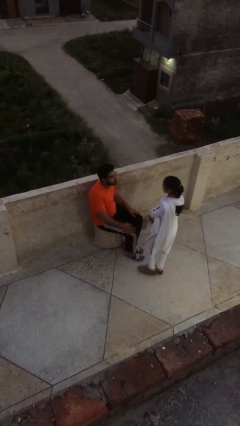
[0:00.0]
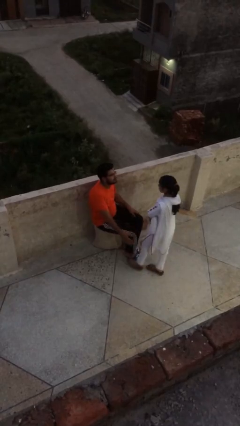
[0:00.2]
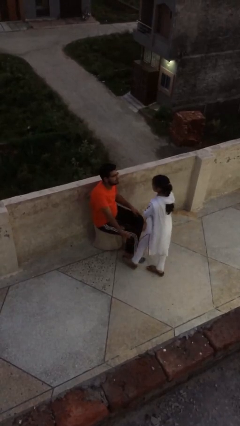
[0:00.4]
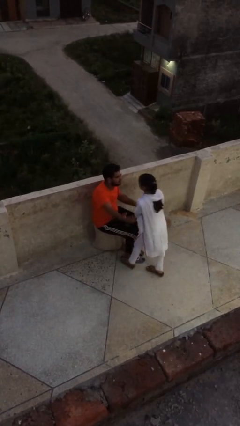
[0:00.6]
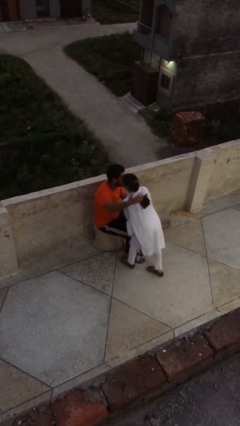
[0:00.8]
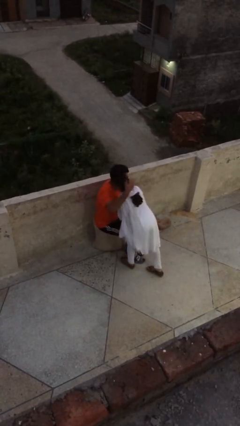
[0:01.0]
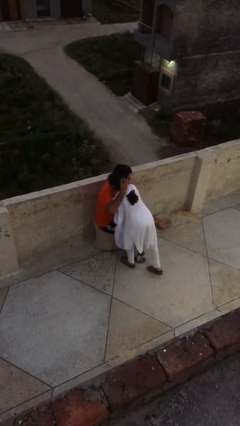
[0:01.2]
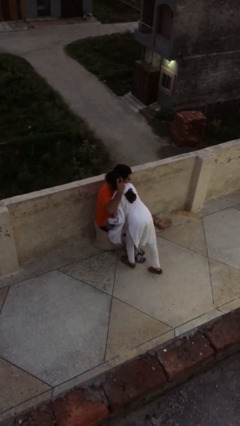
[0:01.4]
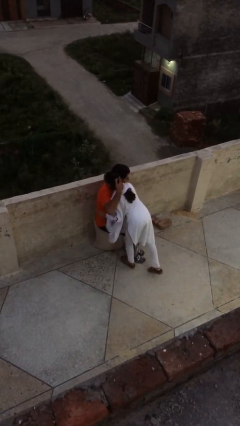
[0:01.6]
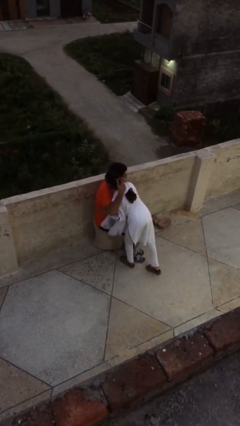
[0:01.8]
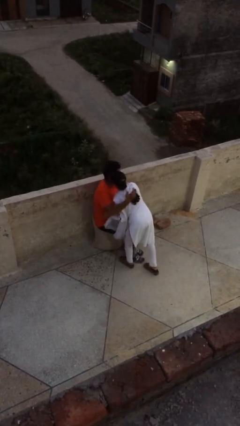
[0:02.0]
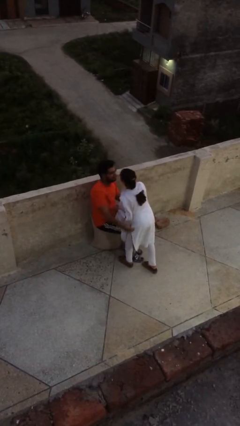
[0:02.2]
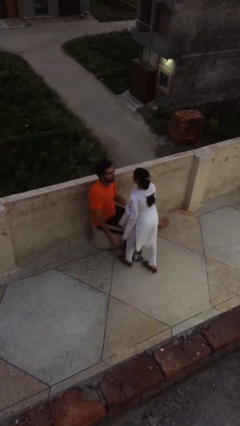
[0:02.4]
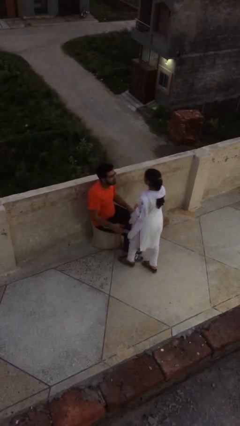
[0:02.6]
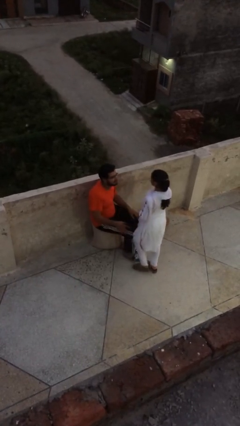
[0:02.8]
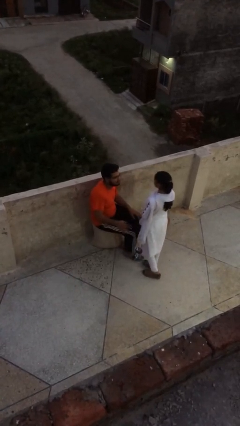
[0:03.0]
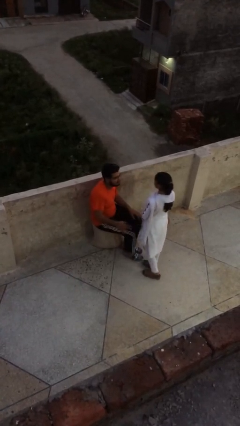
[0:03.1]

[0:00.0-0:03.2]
person embraces person

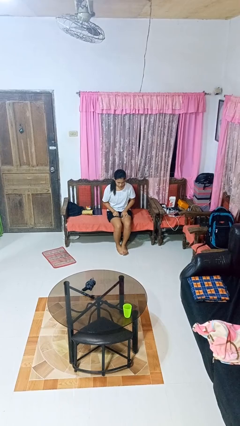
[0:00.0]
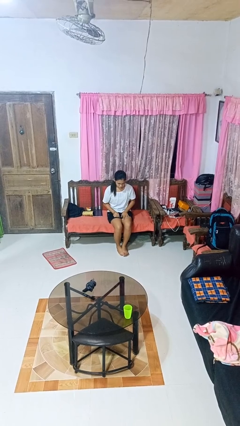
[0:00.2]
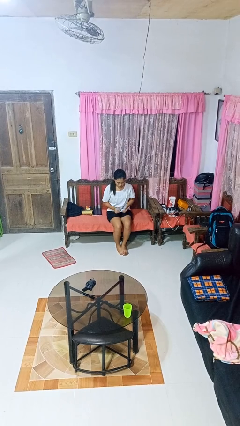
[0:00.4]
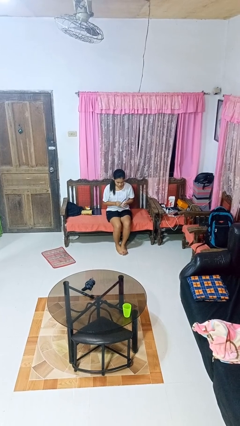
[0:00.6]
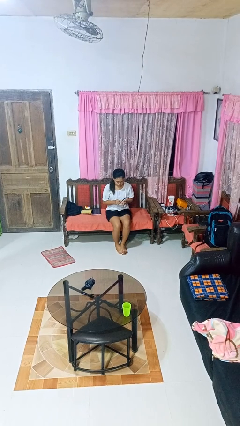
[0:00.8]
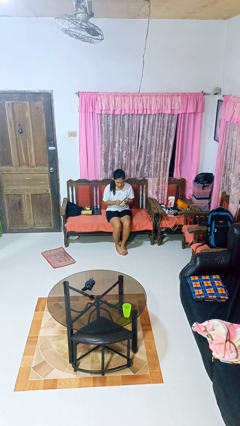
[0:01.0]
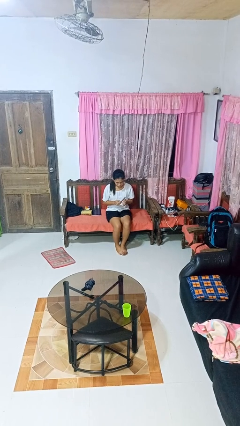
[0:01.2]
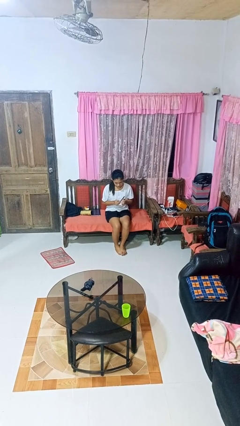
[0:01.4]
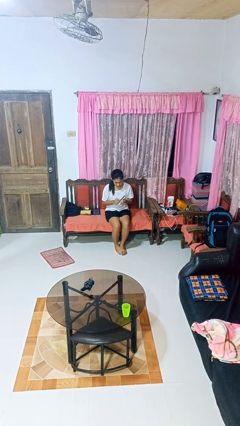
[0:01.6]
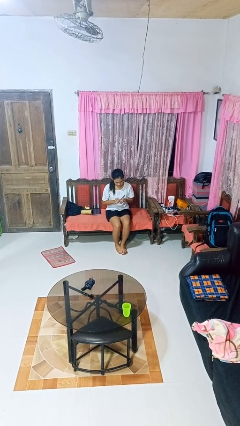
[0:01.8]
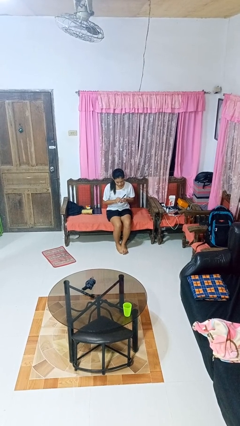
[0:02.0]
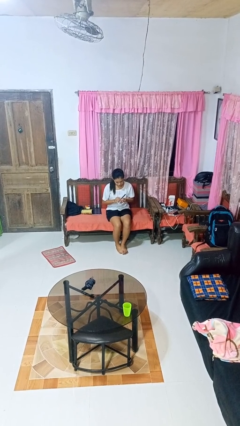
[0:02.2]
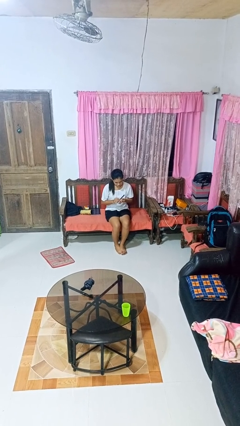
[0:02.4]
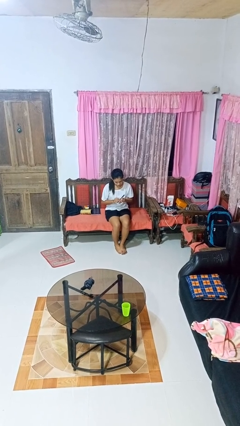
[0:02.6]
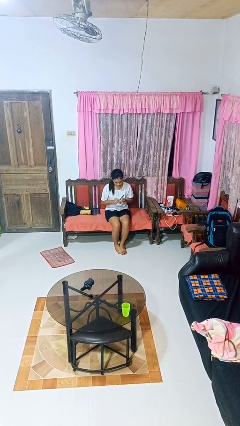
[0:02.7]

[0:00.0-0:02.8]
person files fingernails

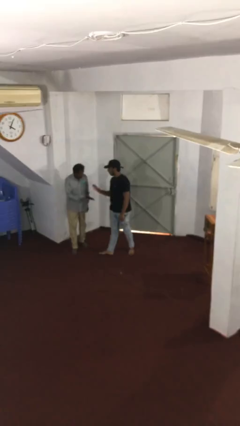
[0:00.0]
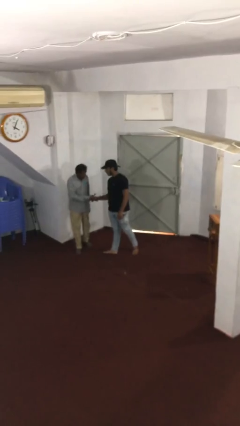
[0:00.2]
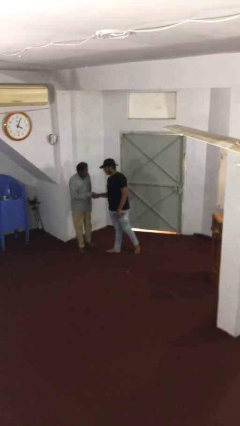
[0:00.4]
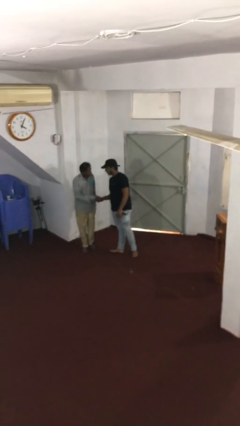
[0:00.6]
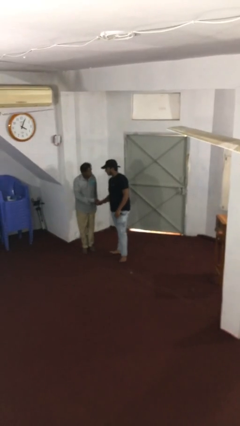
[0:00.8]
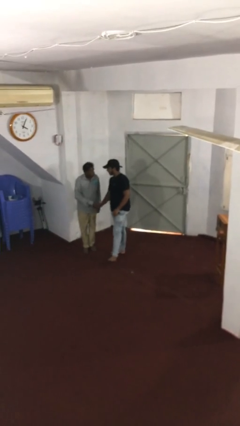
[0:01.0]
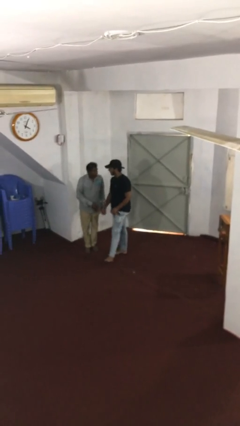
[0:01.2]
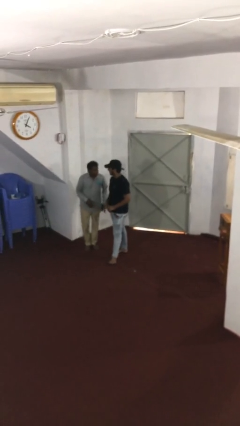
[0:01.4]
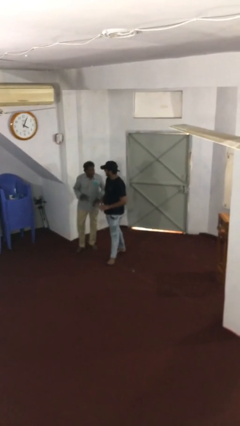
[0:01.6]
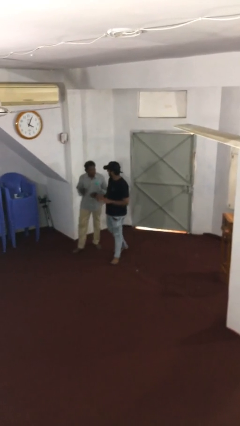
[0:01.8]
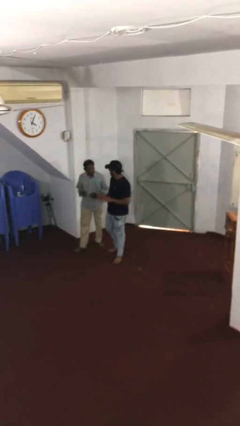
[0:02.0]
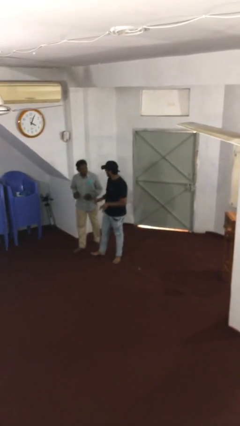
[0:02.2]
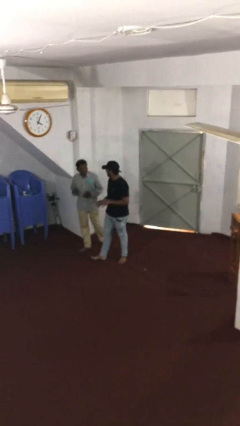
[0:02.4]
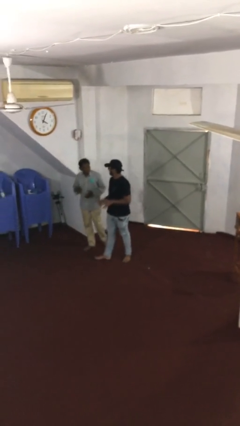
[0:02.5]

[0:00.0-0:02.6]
person shakes hand

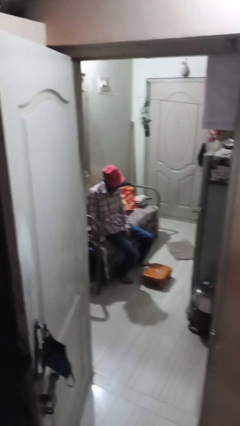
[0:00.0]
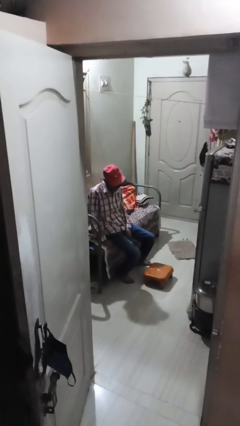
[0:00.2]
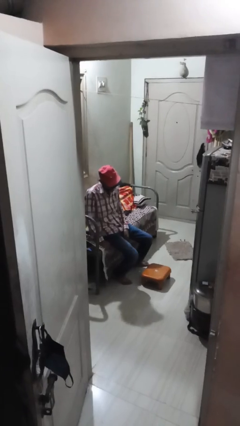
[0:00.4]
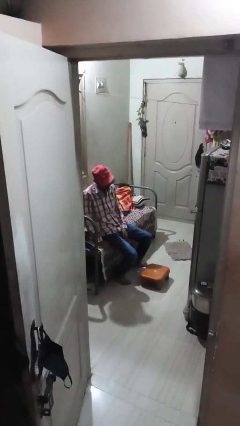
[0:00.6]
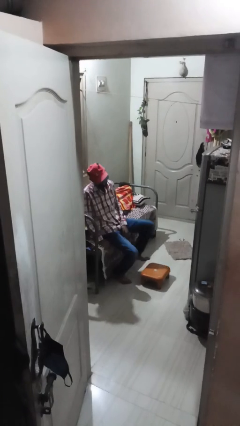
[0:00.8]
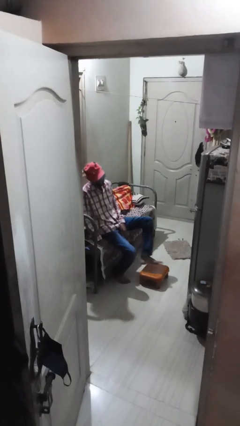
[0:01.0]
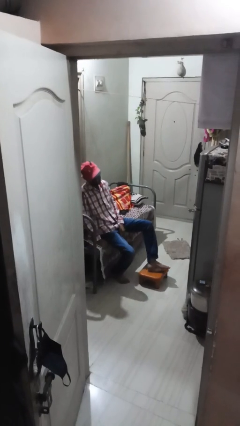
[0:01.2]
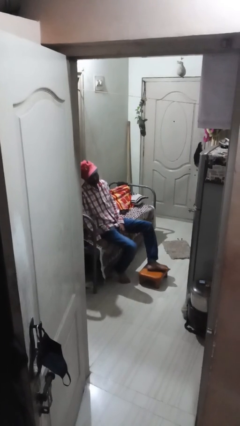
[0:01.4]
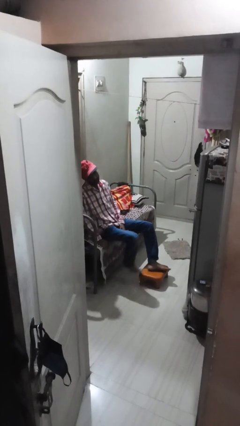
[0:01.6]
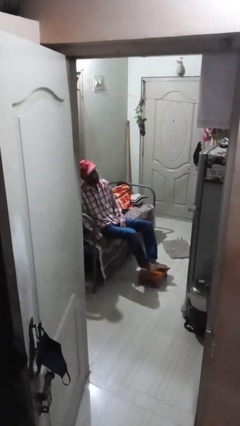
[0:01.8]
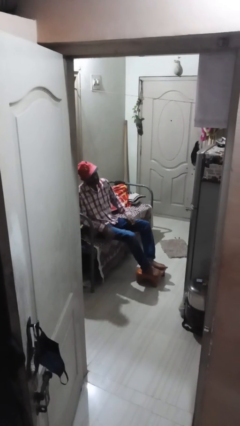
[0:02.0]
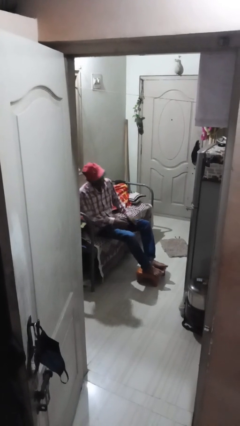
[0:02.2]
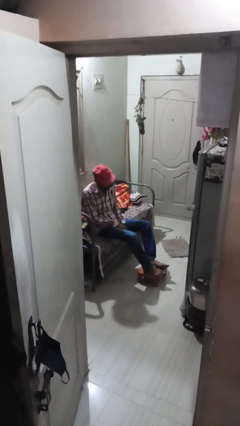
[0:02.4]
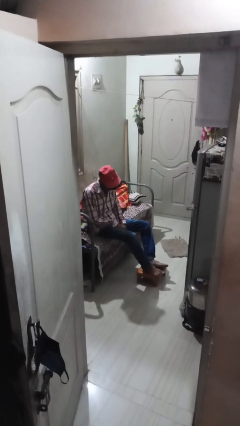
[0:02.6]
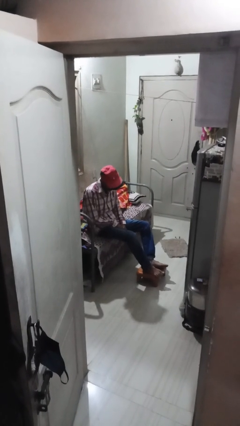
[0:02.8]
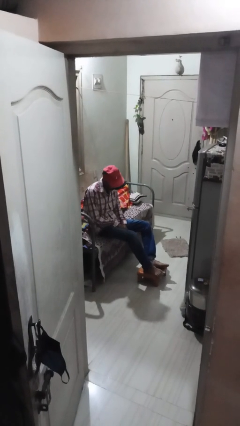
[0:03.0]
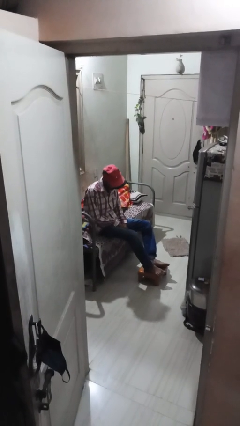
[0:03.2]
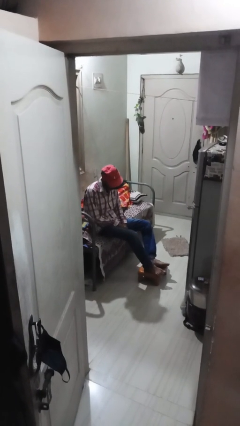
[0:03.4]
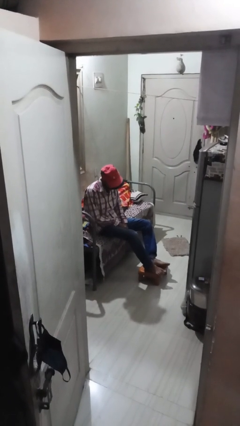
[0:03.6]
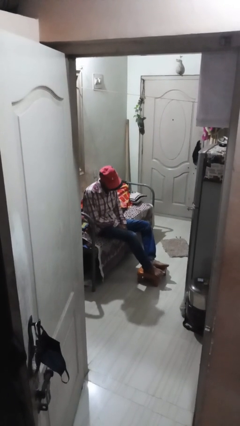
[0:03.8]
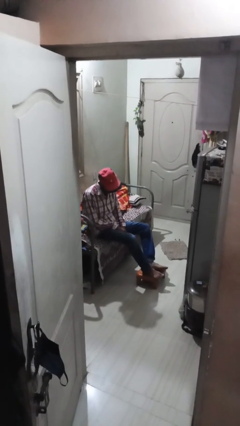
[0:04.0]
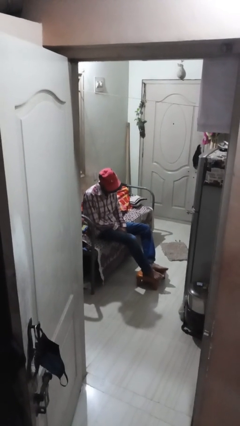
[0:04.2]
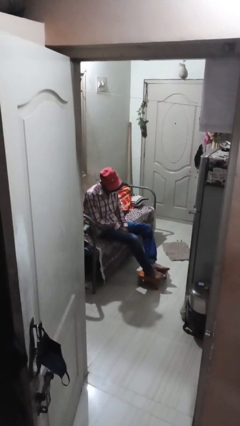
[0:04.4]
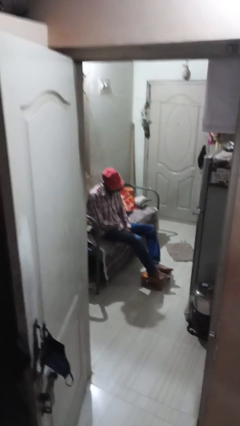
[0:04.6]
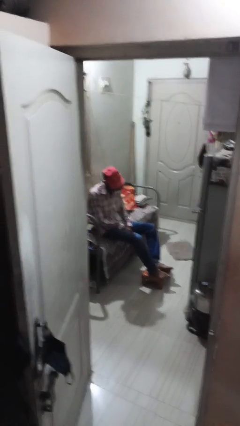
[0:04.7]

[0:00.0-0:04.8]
person puts feet up

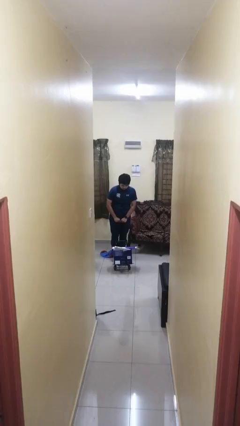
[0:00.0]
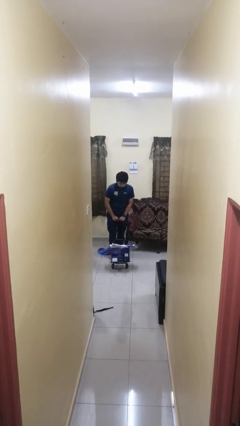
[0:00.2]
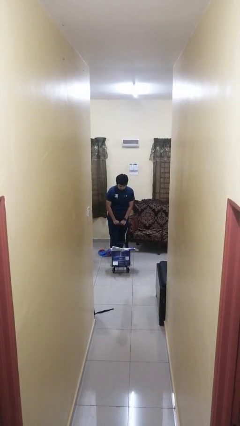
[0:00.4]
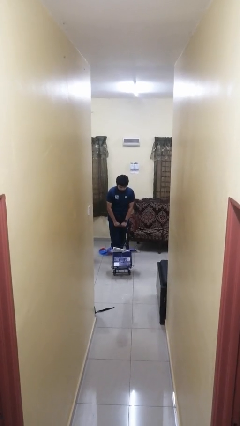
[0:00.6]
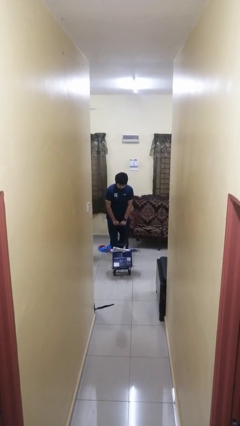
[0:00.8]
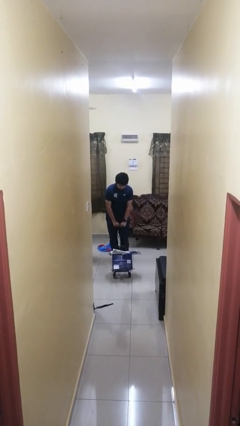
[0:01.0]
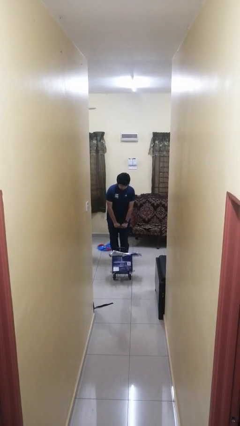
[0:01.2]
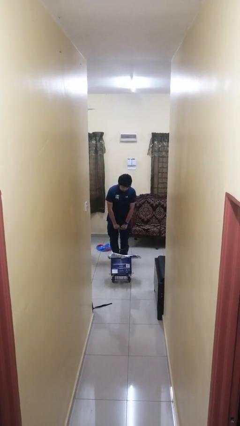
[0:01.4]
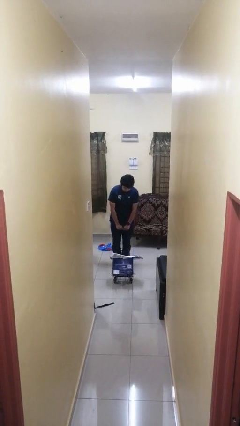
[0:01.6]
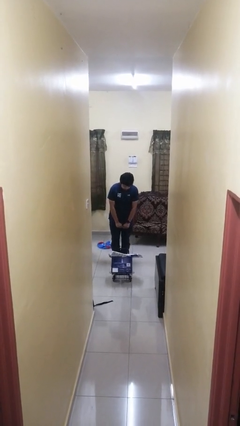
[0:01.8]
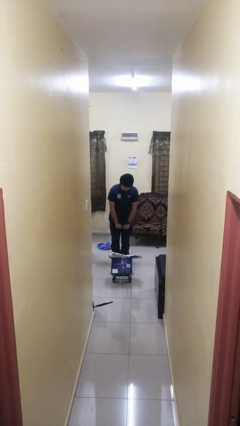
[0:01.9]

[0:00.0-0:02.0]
person pushes wheeled cart

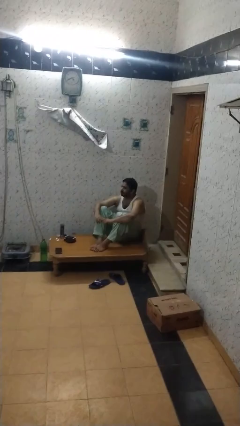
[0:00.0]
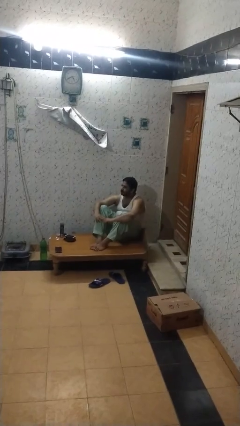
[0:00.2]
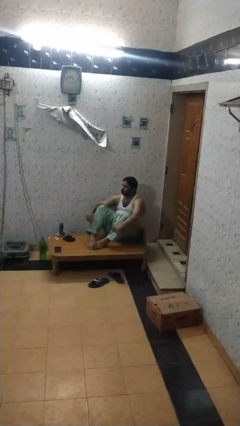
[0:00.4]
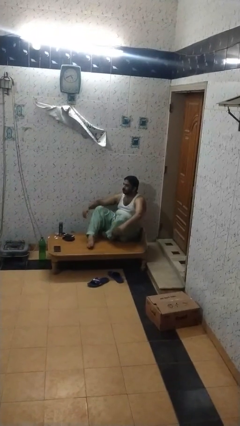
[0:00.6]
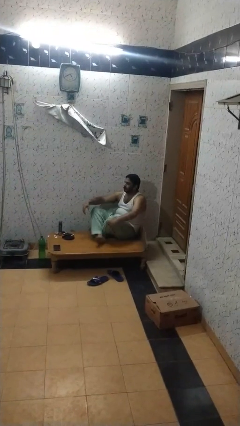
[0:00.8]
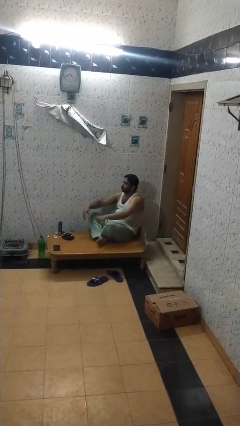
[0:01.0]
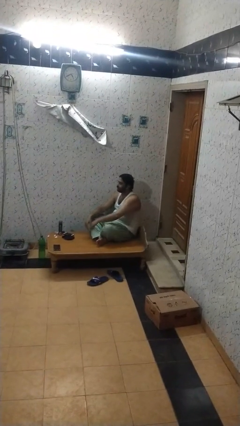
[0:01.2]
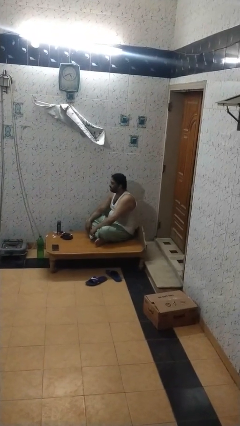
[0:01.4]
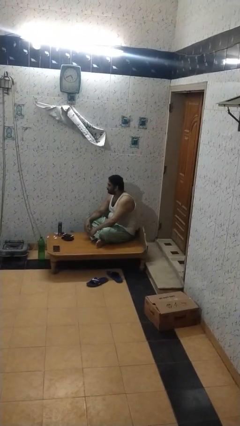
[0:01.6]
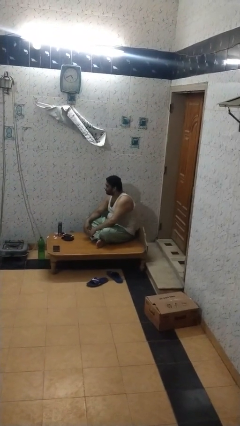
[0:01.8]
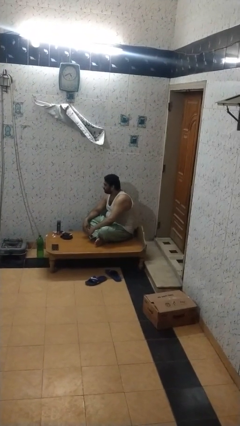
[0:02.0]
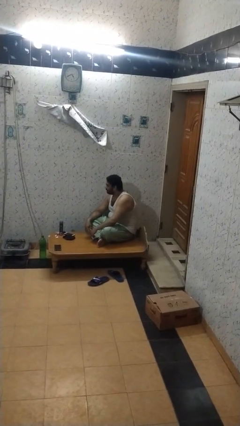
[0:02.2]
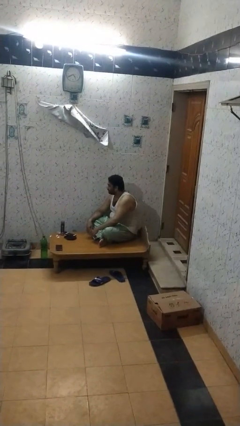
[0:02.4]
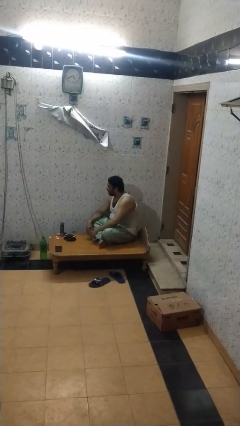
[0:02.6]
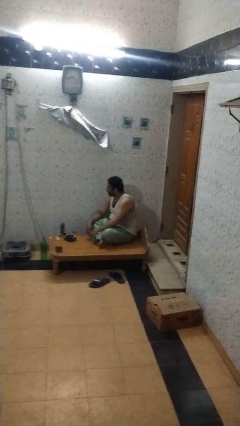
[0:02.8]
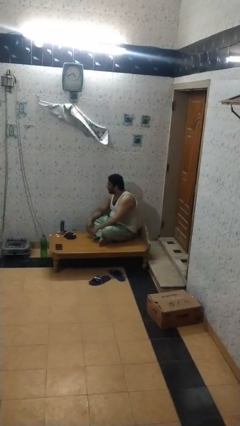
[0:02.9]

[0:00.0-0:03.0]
person crosses legs
